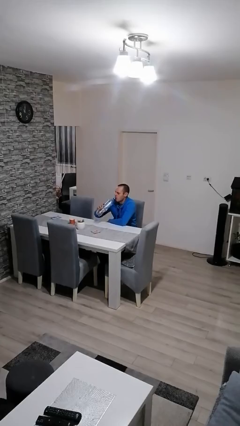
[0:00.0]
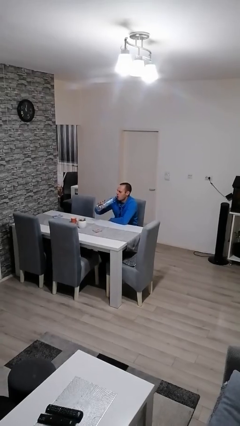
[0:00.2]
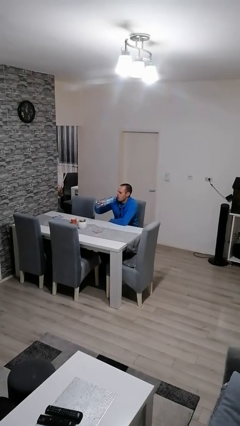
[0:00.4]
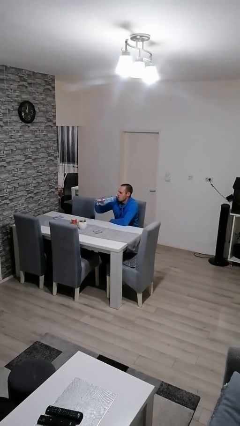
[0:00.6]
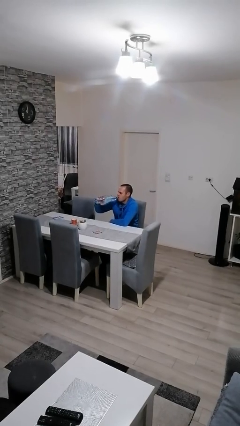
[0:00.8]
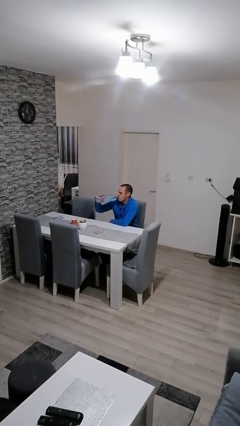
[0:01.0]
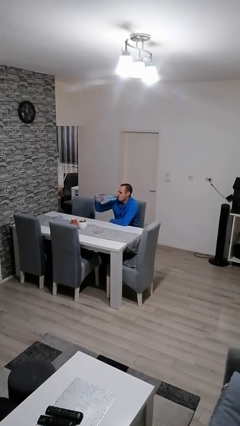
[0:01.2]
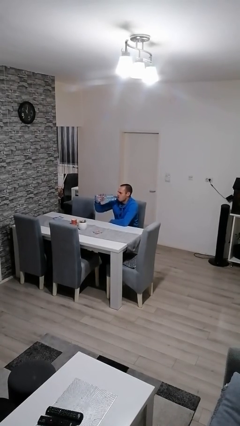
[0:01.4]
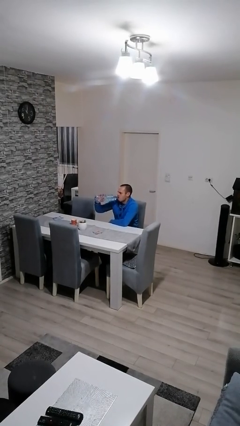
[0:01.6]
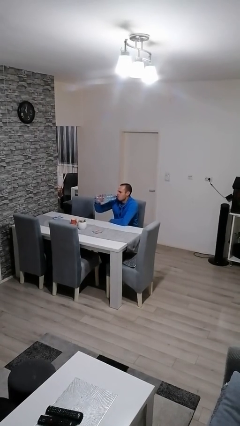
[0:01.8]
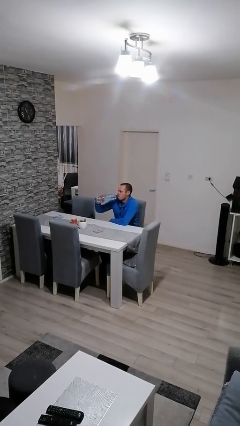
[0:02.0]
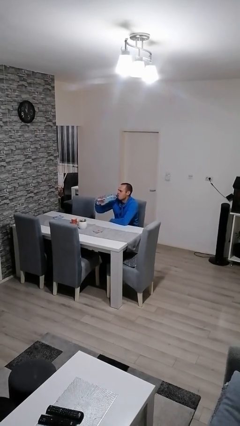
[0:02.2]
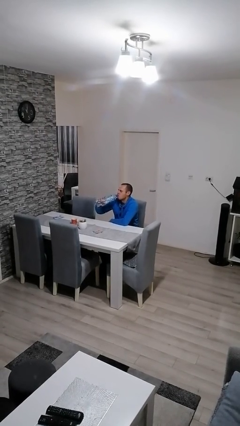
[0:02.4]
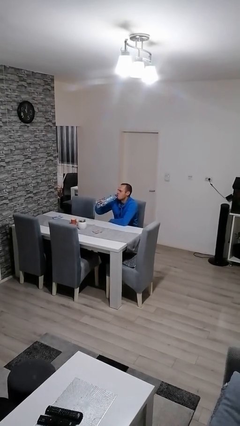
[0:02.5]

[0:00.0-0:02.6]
person drinks from bottle

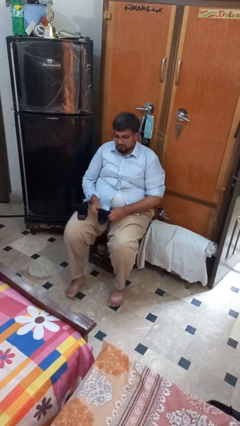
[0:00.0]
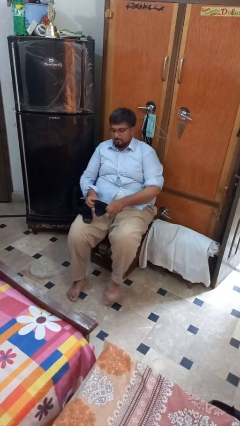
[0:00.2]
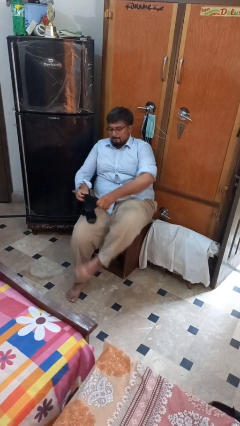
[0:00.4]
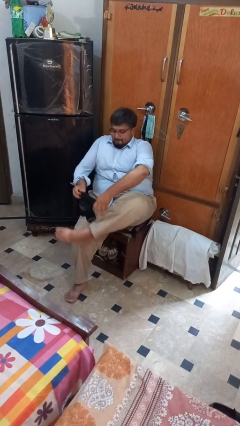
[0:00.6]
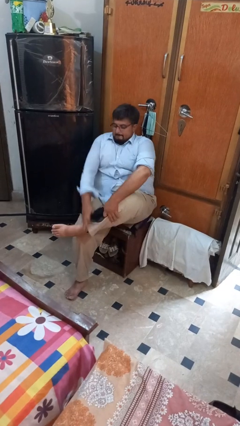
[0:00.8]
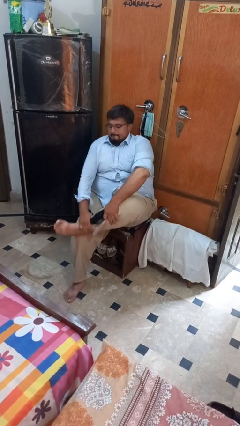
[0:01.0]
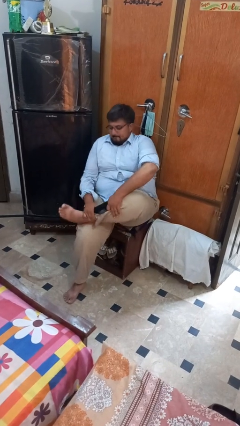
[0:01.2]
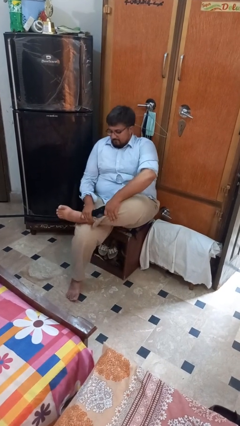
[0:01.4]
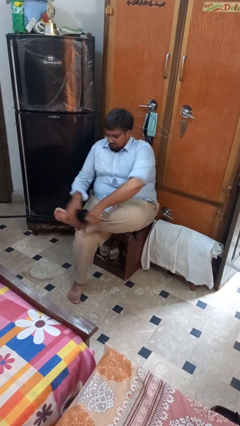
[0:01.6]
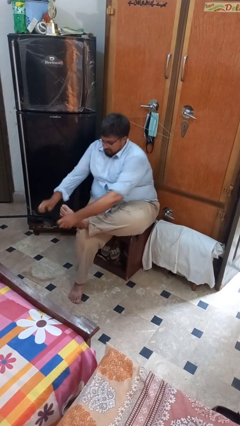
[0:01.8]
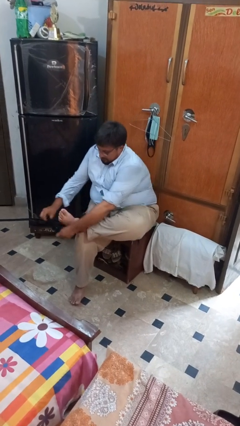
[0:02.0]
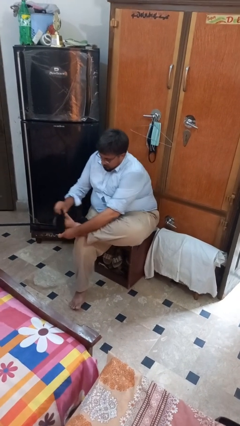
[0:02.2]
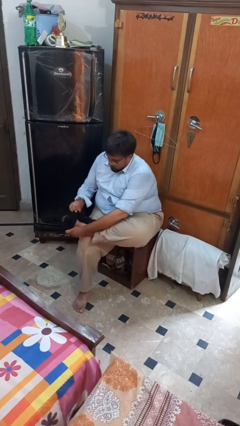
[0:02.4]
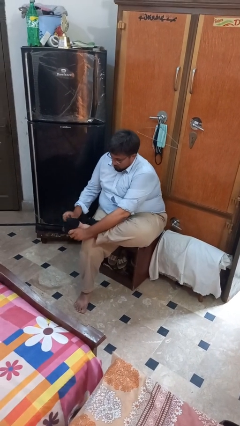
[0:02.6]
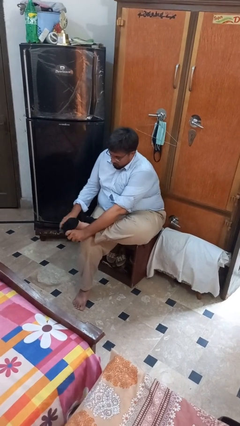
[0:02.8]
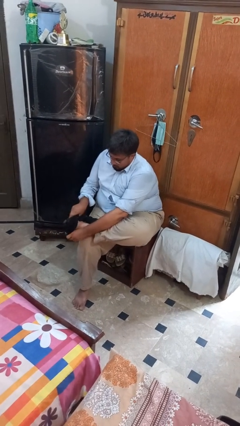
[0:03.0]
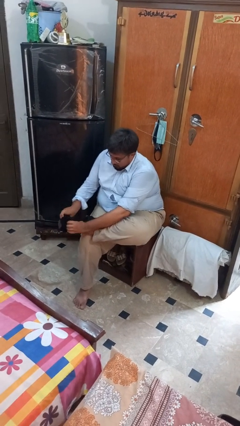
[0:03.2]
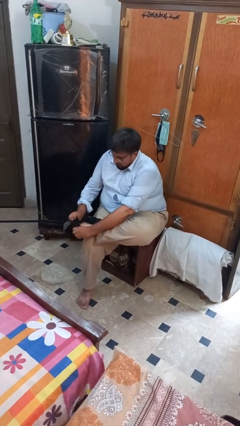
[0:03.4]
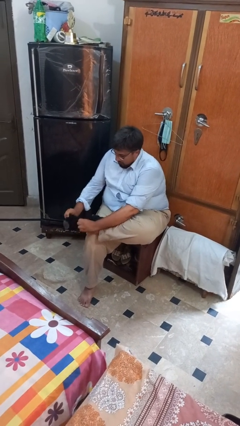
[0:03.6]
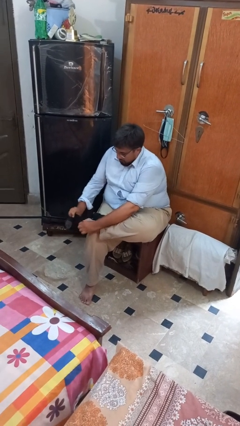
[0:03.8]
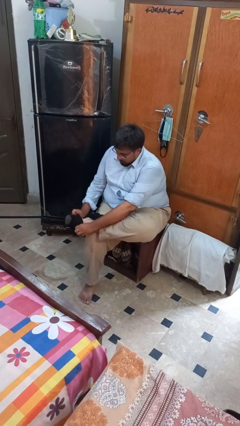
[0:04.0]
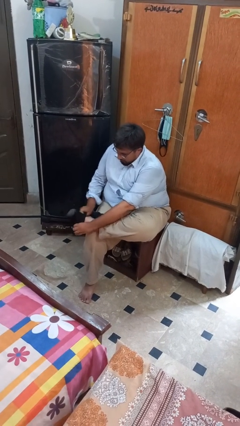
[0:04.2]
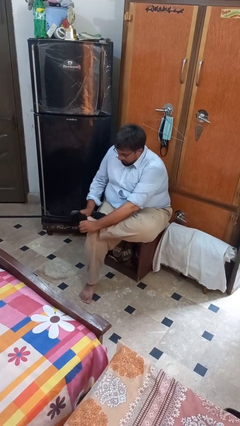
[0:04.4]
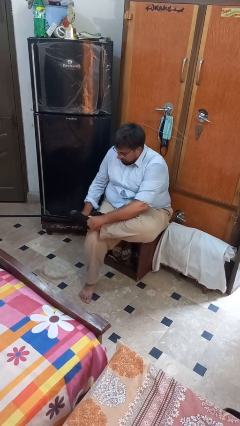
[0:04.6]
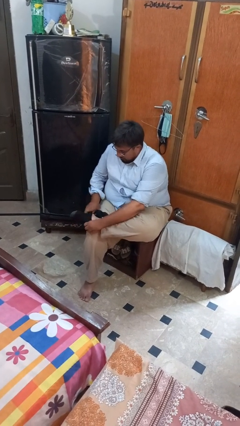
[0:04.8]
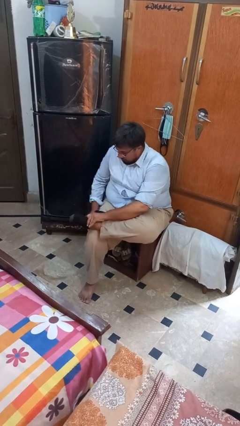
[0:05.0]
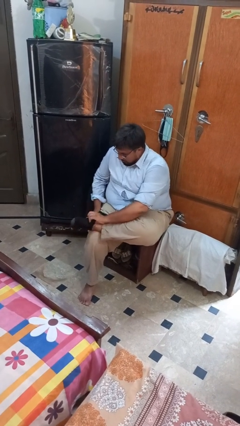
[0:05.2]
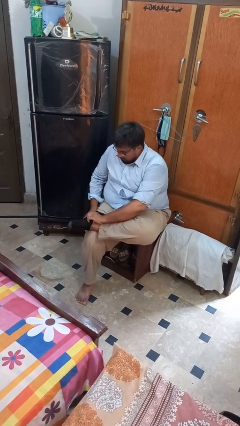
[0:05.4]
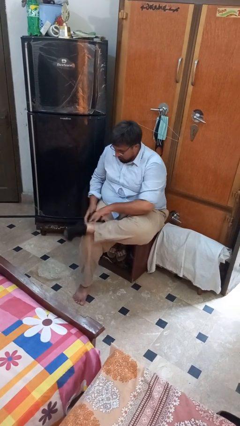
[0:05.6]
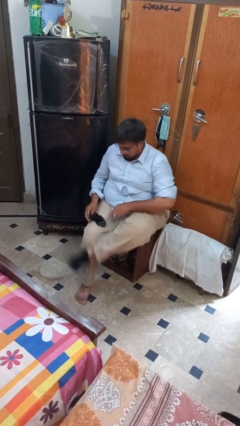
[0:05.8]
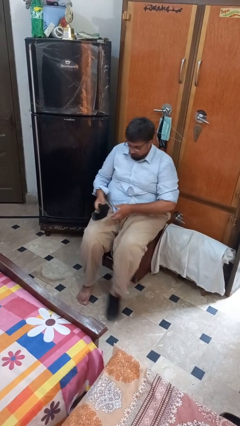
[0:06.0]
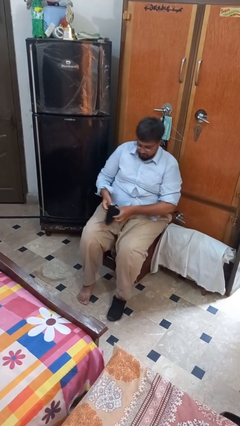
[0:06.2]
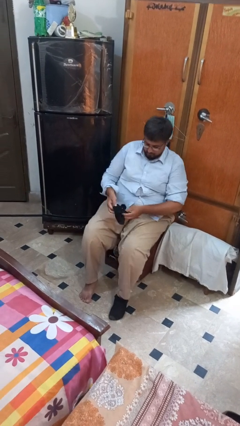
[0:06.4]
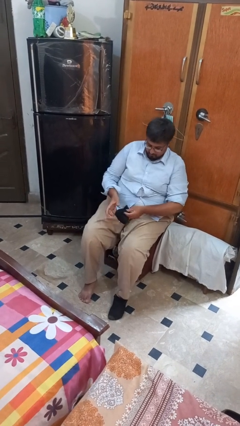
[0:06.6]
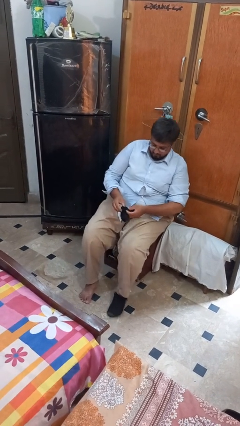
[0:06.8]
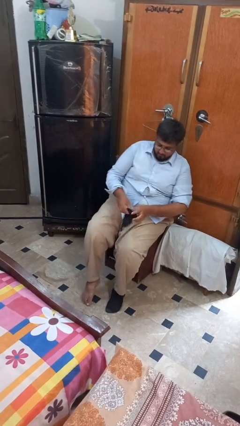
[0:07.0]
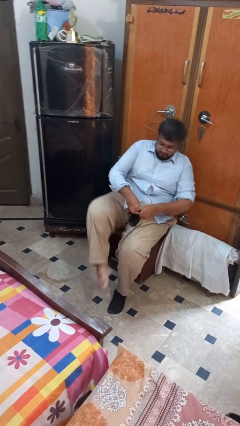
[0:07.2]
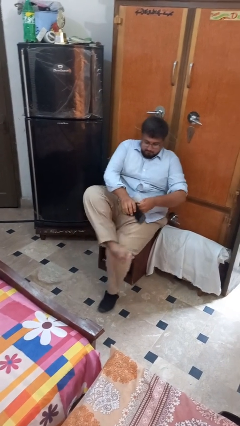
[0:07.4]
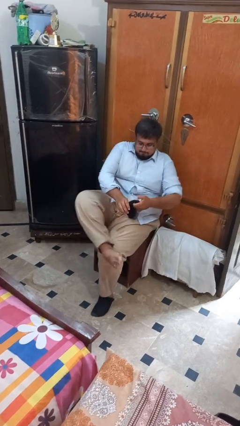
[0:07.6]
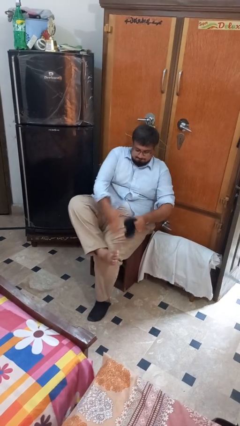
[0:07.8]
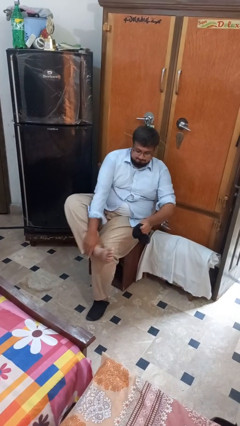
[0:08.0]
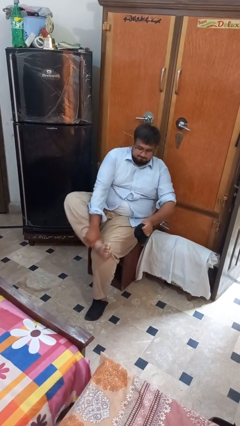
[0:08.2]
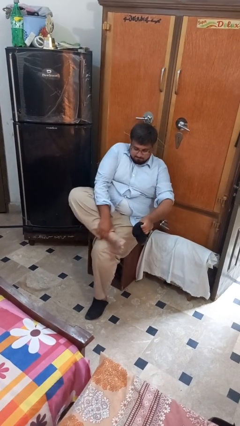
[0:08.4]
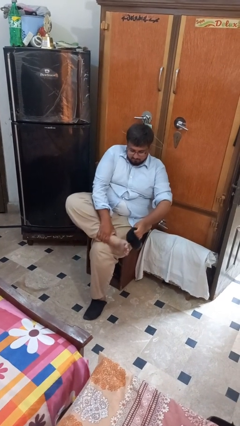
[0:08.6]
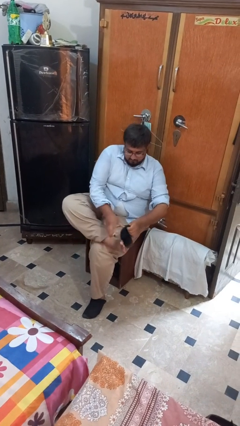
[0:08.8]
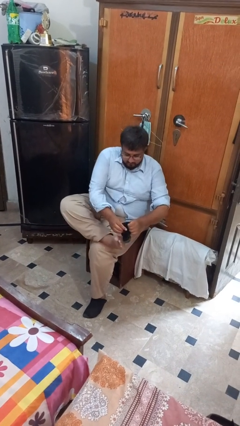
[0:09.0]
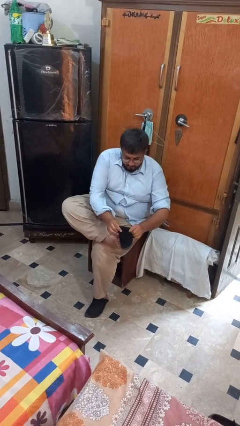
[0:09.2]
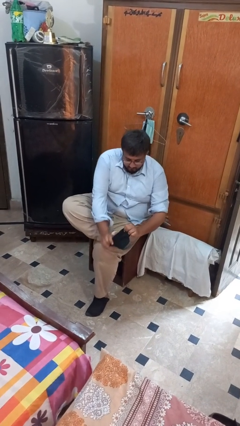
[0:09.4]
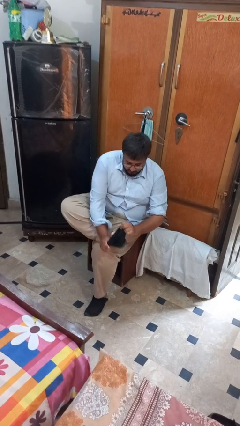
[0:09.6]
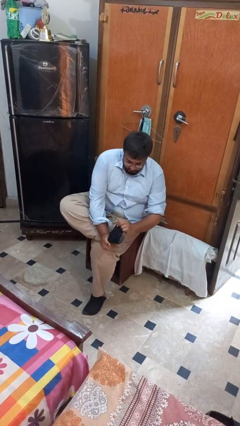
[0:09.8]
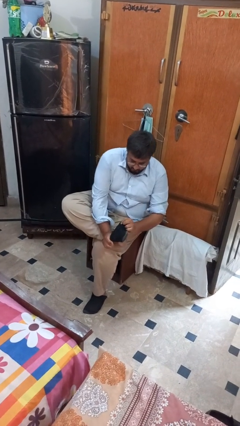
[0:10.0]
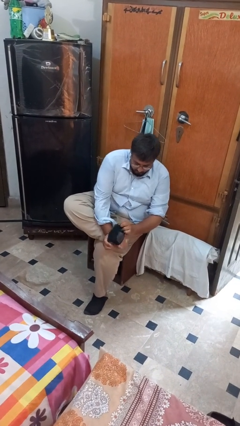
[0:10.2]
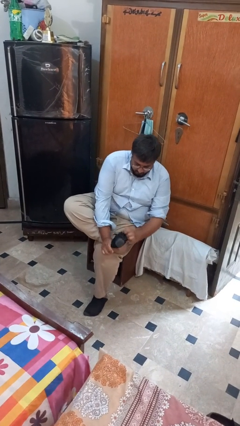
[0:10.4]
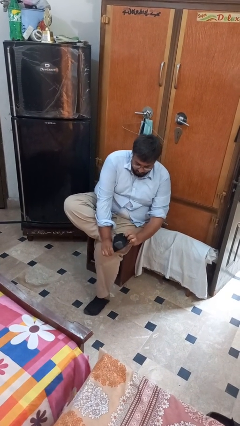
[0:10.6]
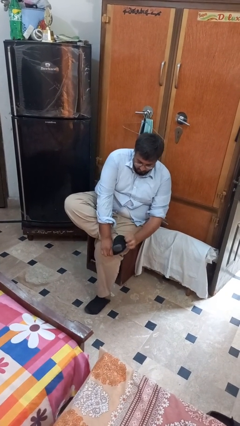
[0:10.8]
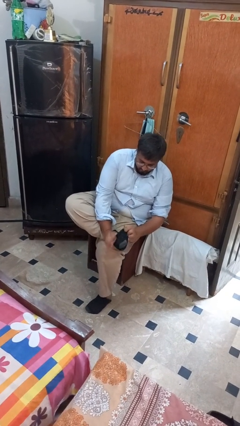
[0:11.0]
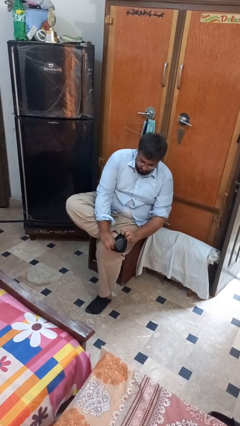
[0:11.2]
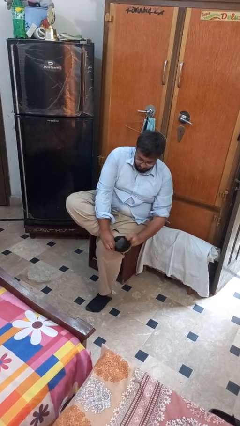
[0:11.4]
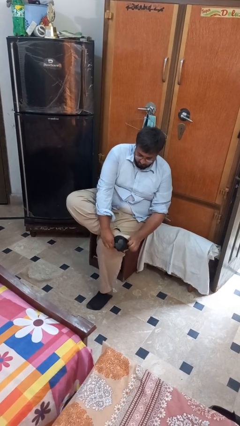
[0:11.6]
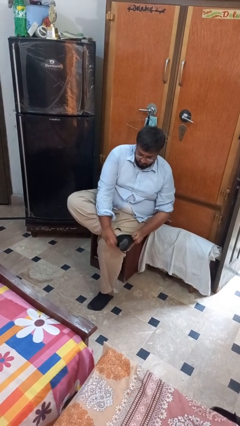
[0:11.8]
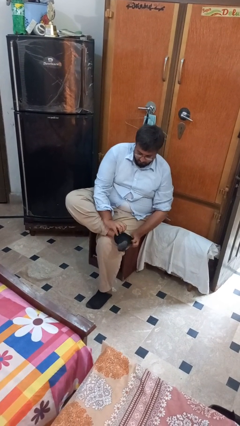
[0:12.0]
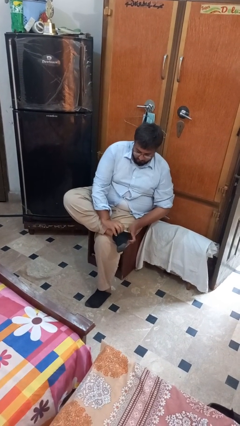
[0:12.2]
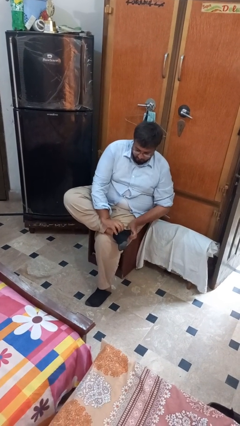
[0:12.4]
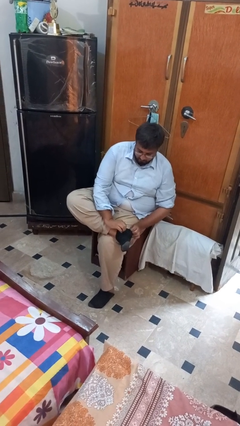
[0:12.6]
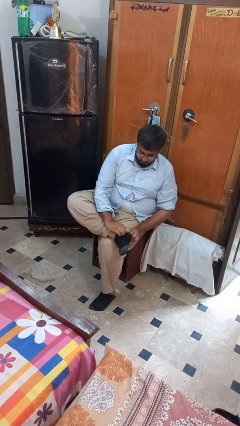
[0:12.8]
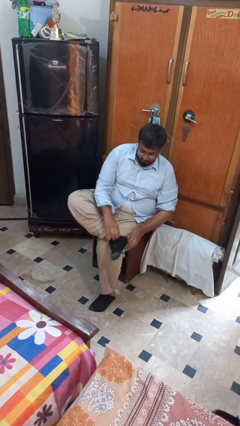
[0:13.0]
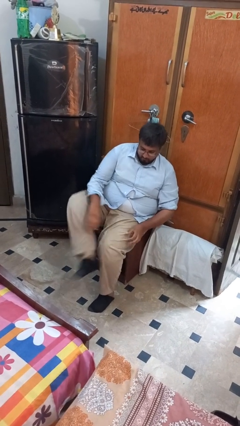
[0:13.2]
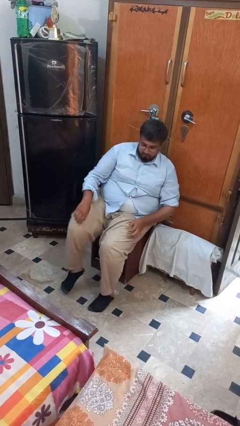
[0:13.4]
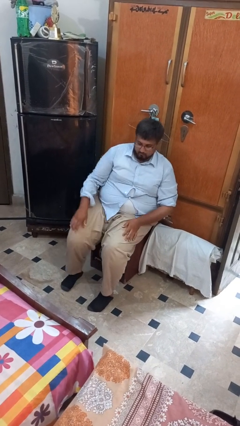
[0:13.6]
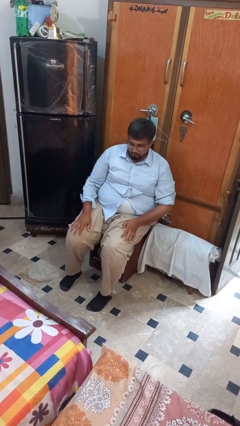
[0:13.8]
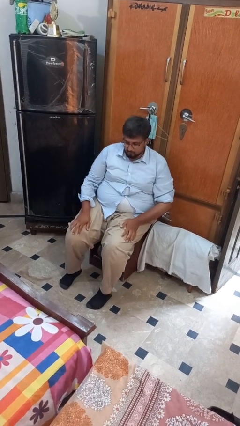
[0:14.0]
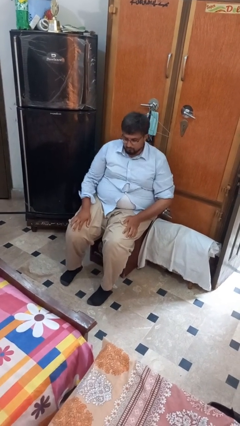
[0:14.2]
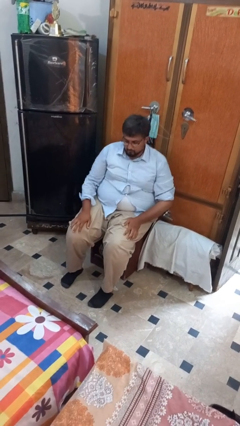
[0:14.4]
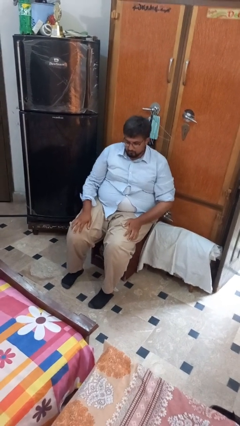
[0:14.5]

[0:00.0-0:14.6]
person puts on socks

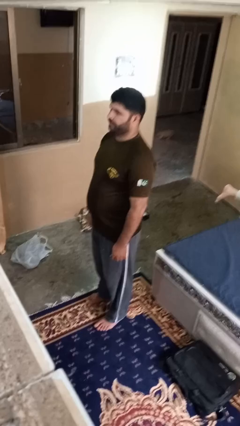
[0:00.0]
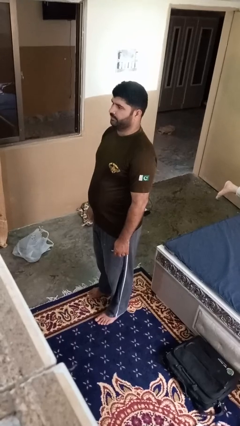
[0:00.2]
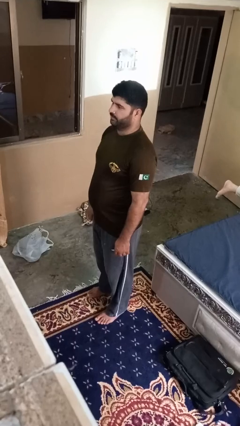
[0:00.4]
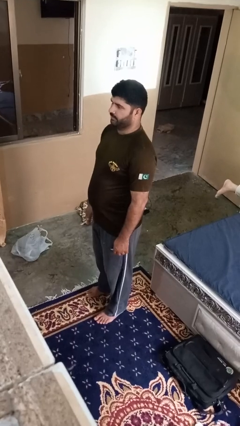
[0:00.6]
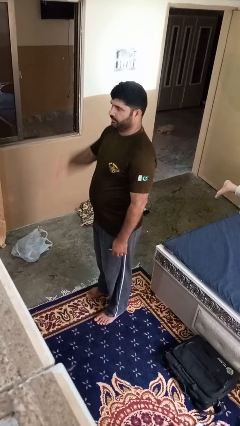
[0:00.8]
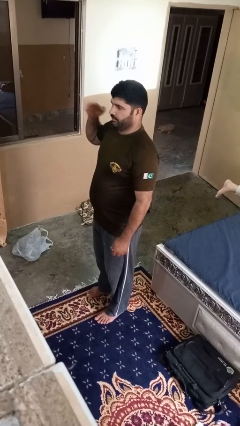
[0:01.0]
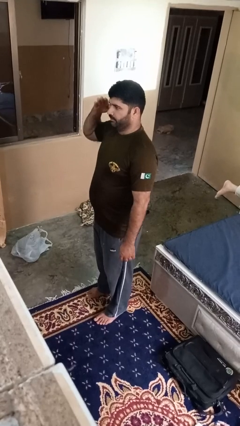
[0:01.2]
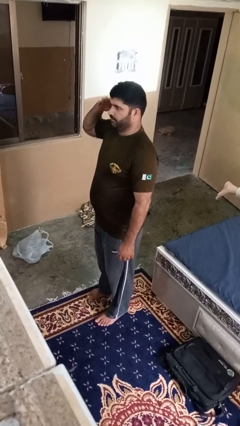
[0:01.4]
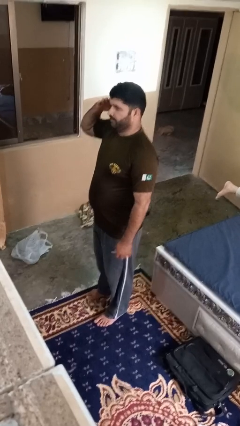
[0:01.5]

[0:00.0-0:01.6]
person salutes
